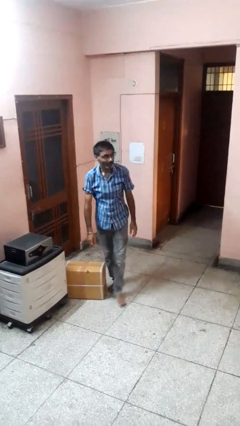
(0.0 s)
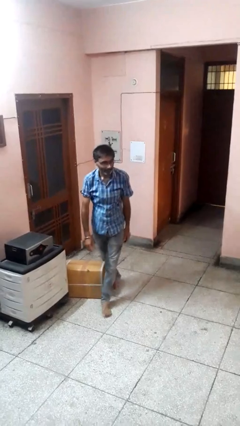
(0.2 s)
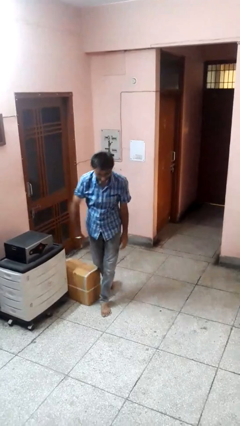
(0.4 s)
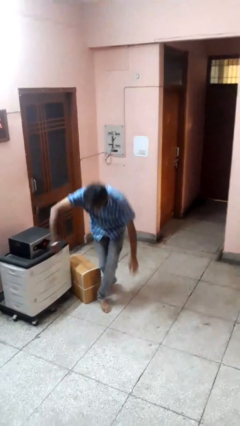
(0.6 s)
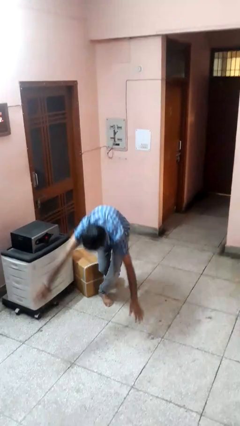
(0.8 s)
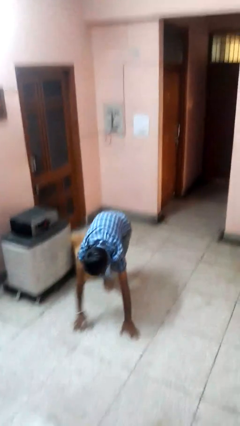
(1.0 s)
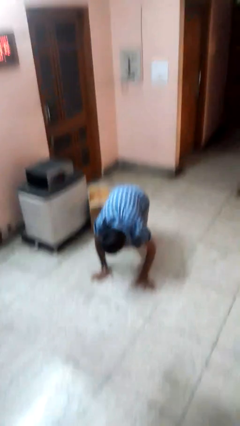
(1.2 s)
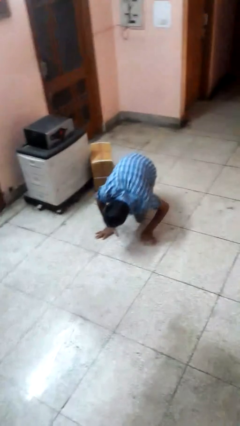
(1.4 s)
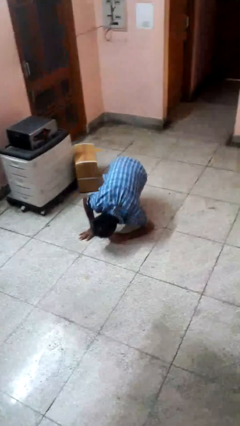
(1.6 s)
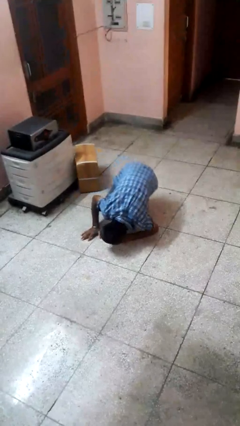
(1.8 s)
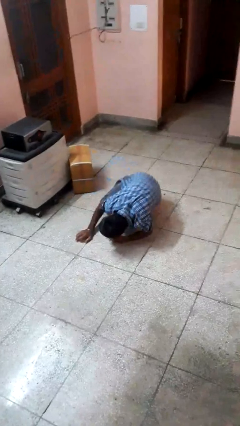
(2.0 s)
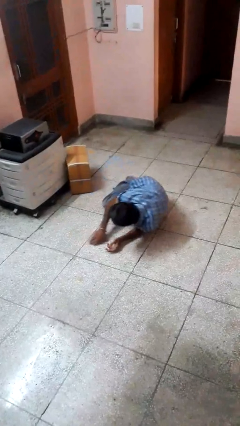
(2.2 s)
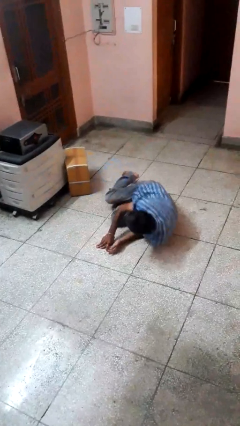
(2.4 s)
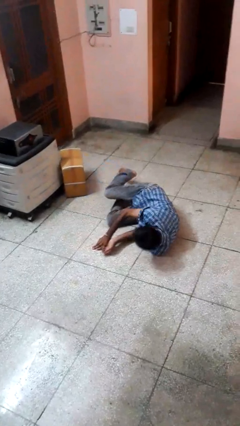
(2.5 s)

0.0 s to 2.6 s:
person trips on object on floor

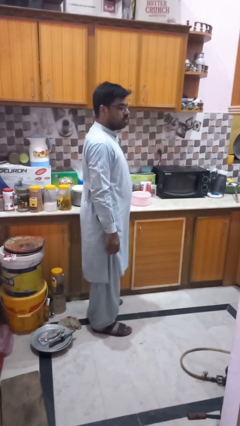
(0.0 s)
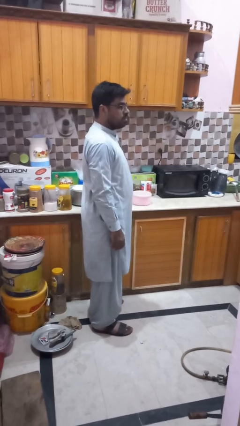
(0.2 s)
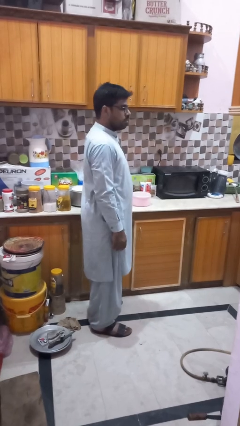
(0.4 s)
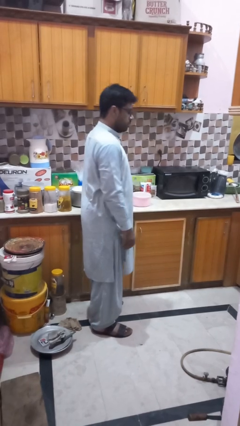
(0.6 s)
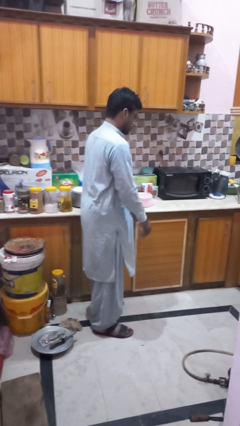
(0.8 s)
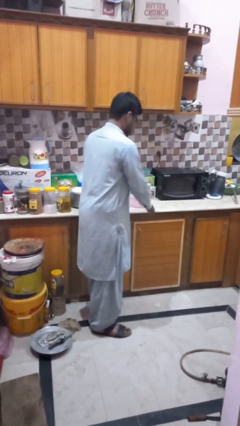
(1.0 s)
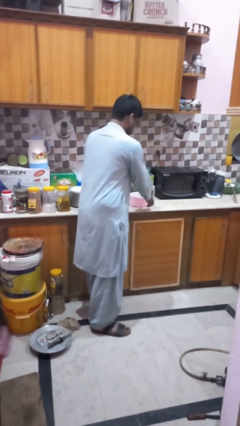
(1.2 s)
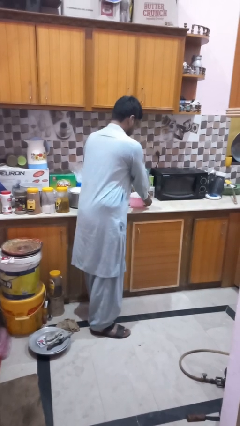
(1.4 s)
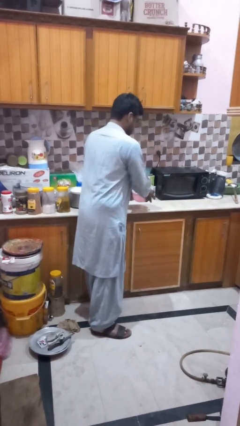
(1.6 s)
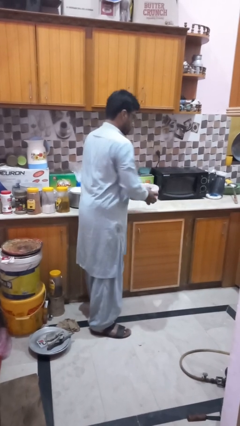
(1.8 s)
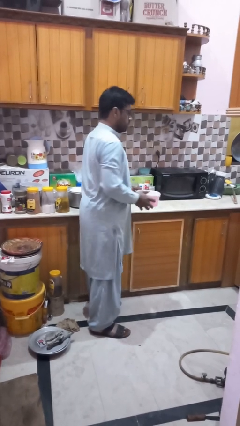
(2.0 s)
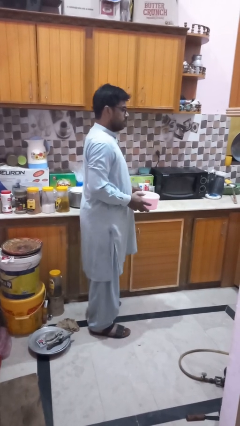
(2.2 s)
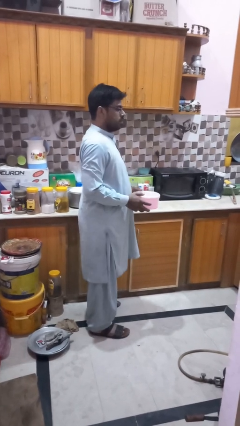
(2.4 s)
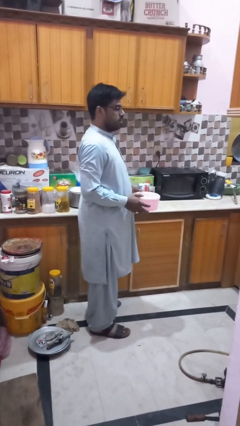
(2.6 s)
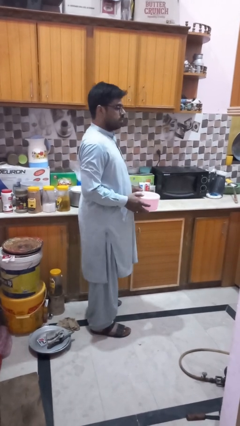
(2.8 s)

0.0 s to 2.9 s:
person picks up object from countertop

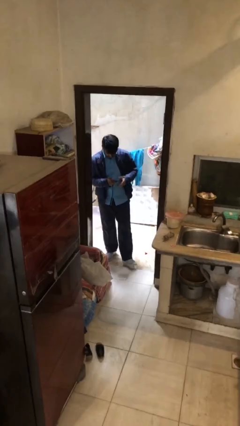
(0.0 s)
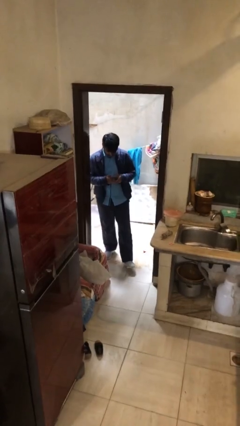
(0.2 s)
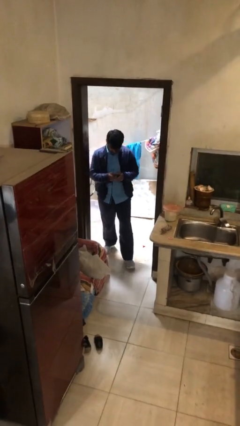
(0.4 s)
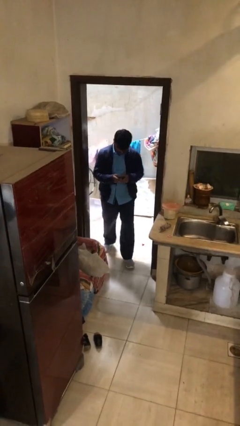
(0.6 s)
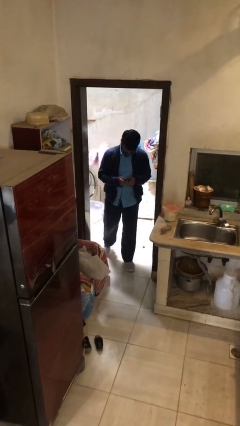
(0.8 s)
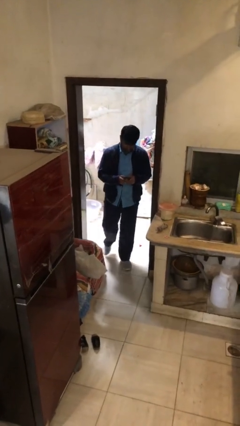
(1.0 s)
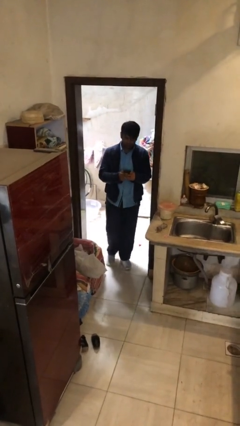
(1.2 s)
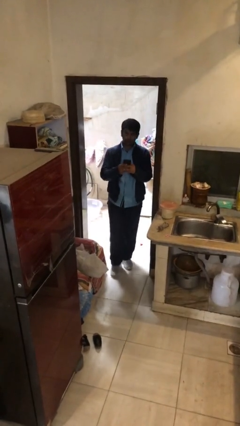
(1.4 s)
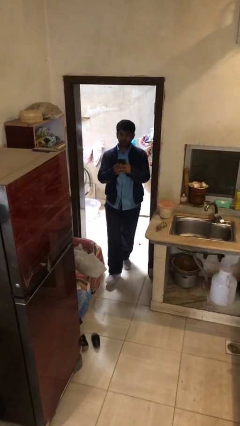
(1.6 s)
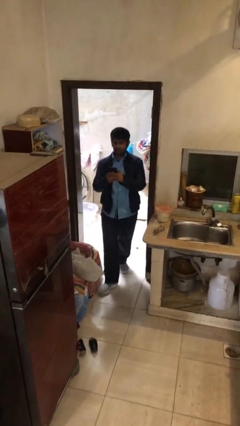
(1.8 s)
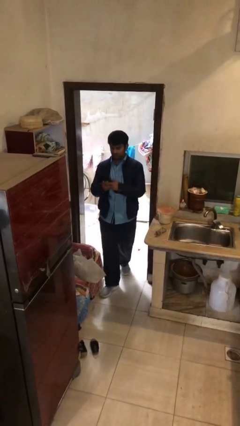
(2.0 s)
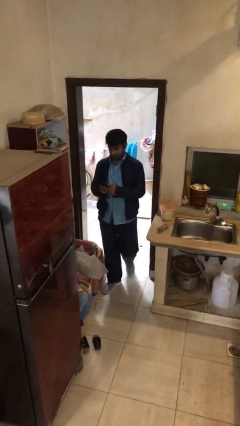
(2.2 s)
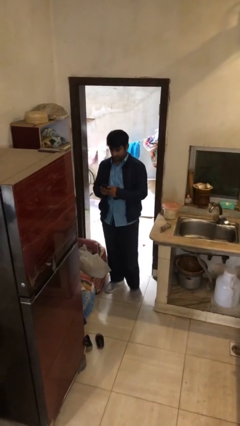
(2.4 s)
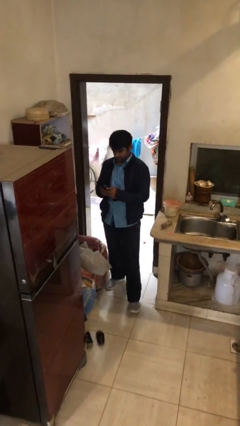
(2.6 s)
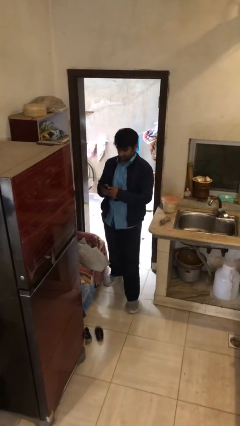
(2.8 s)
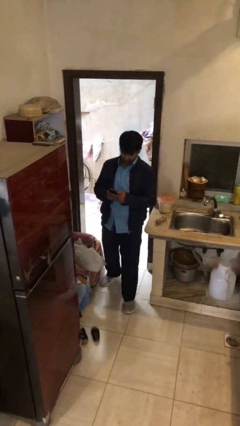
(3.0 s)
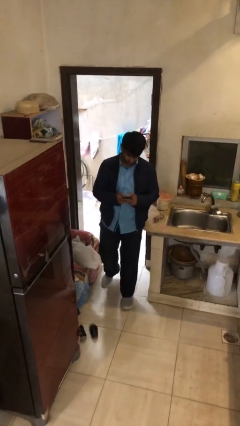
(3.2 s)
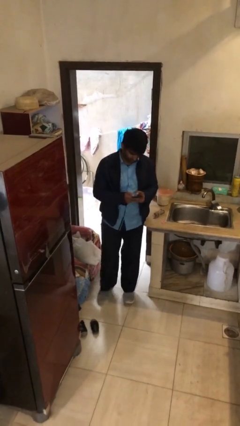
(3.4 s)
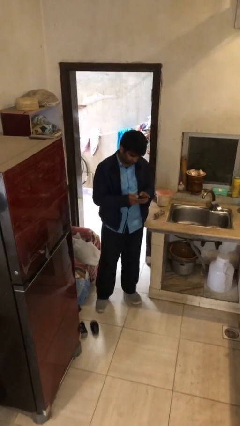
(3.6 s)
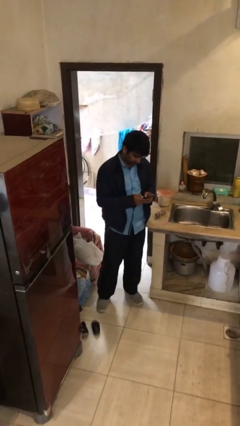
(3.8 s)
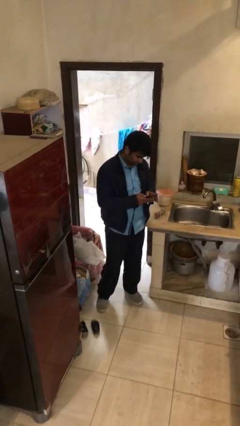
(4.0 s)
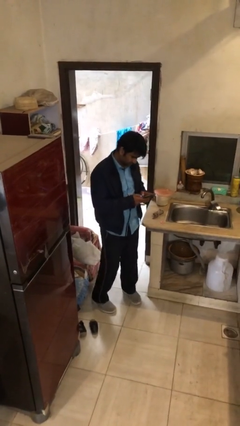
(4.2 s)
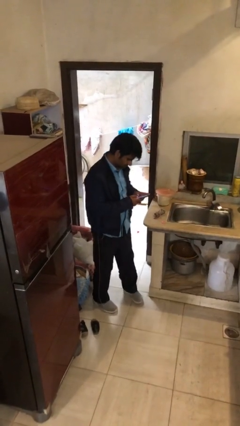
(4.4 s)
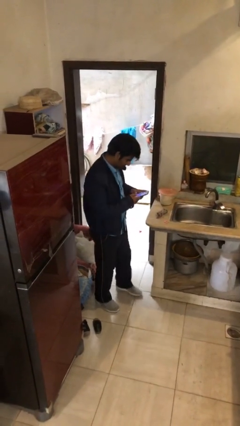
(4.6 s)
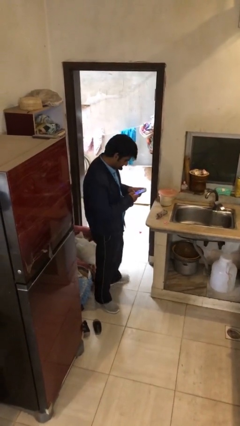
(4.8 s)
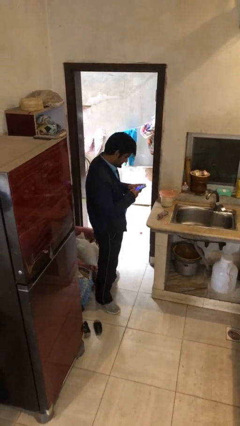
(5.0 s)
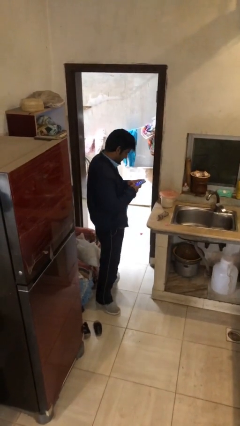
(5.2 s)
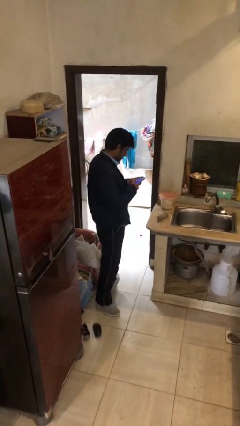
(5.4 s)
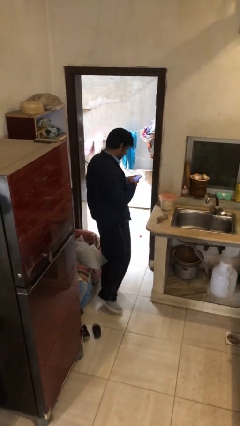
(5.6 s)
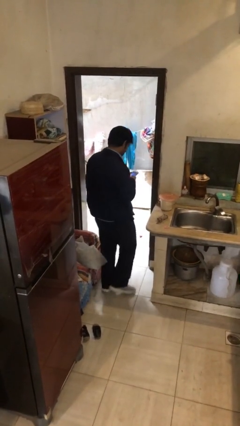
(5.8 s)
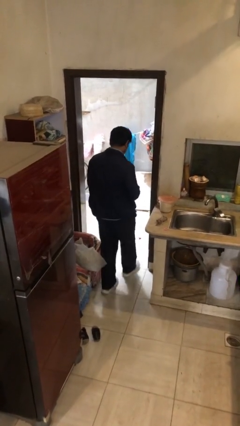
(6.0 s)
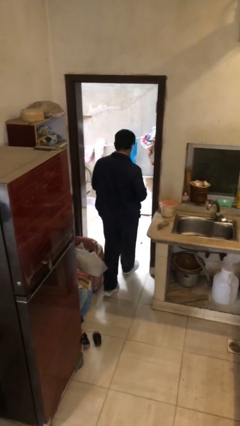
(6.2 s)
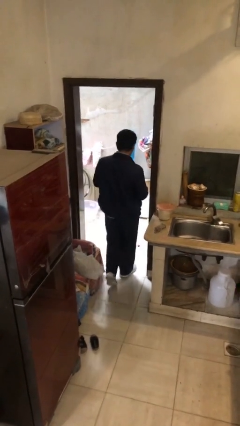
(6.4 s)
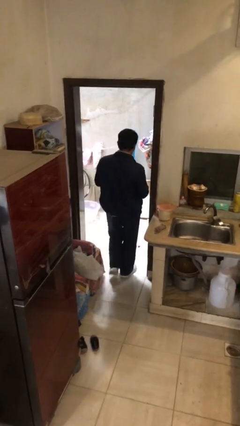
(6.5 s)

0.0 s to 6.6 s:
person enters scene through structure

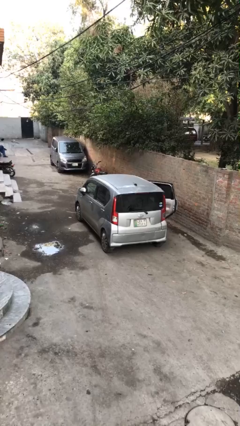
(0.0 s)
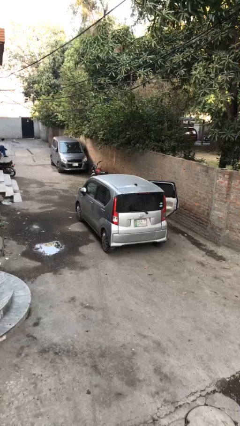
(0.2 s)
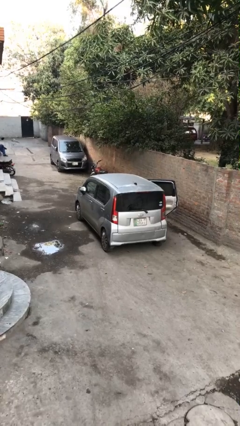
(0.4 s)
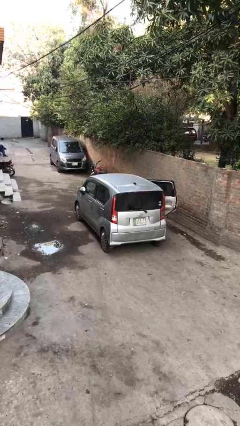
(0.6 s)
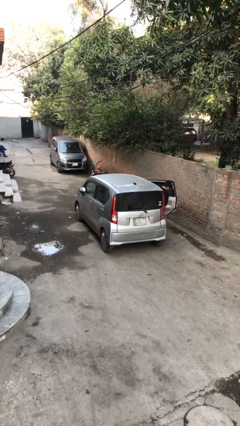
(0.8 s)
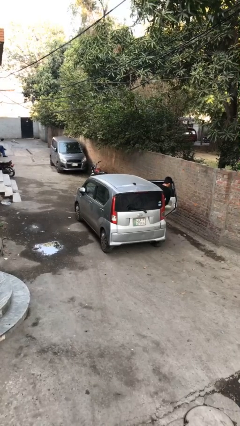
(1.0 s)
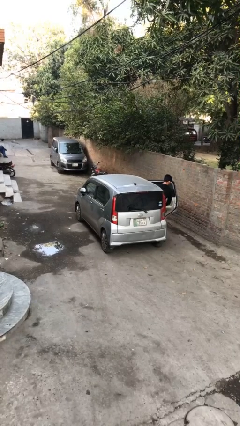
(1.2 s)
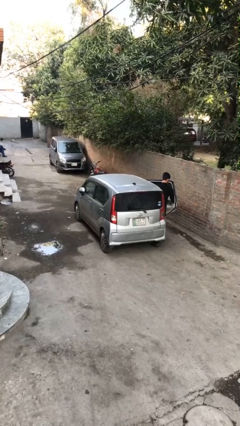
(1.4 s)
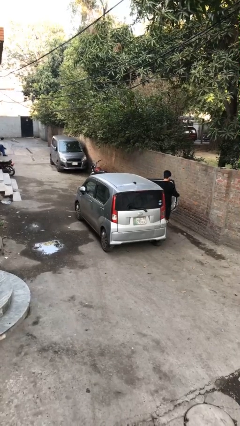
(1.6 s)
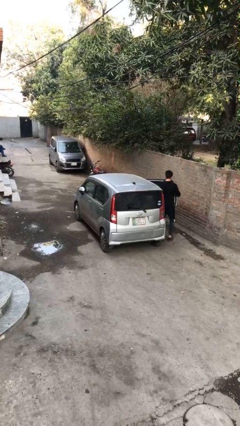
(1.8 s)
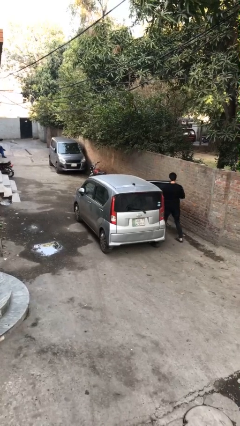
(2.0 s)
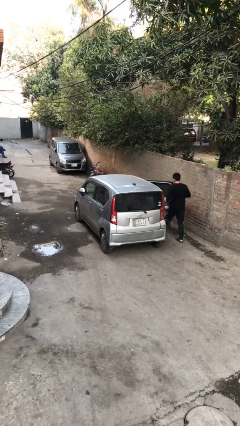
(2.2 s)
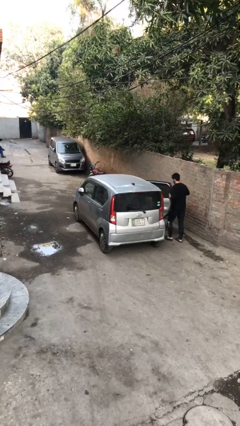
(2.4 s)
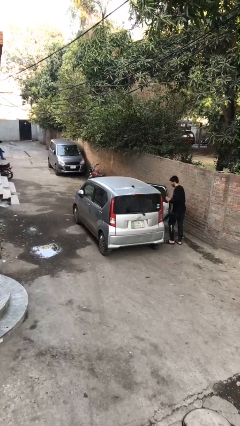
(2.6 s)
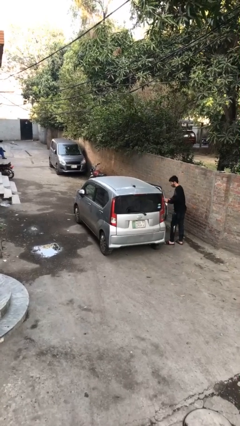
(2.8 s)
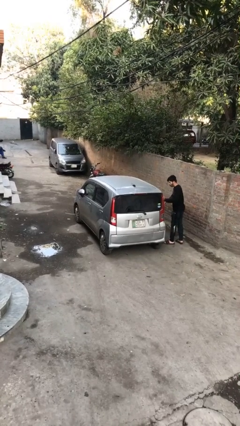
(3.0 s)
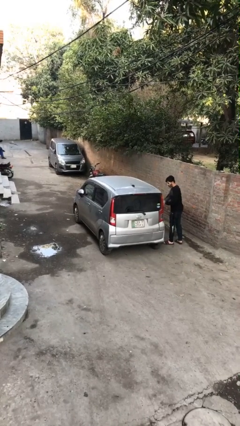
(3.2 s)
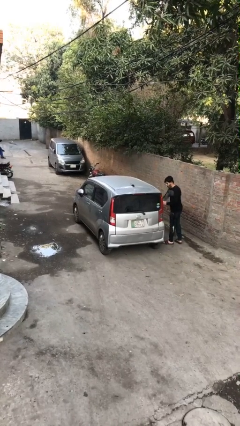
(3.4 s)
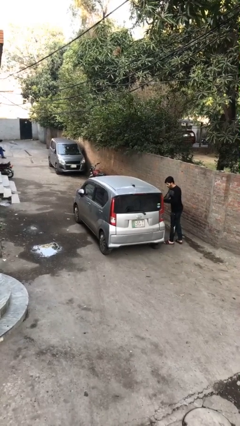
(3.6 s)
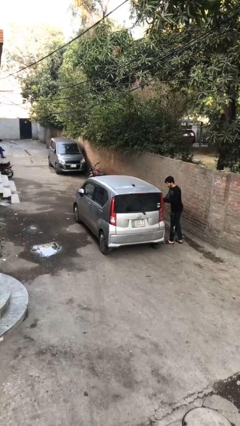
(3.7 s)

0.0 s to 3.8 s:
car drops off person

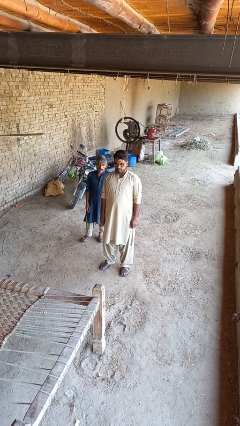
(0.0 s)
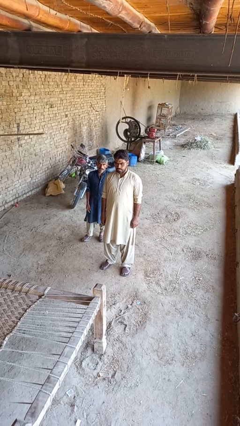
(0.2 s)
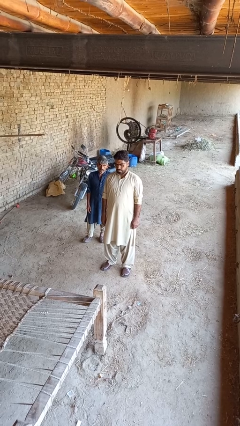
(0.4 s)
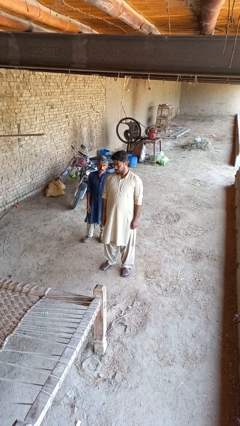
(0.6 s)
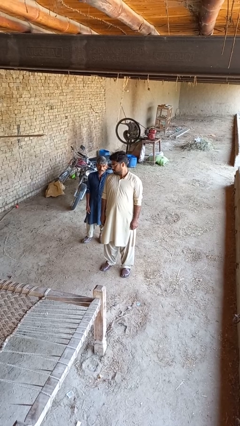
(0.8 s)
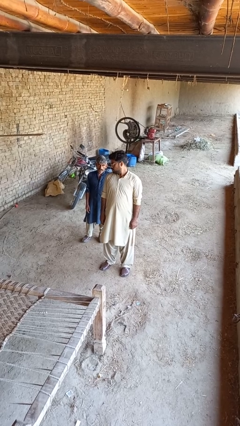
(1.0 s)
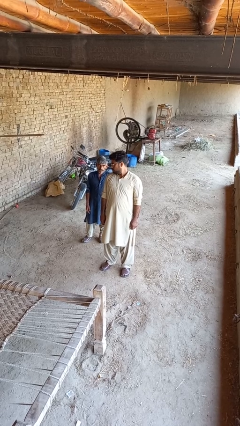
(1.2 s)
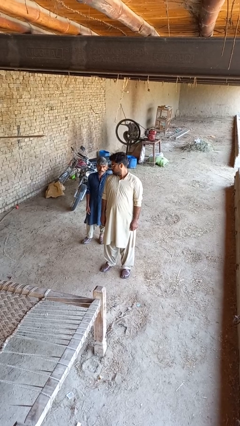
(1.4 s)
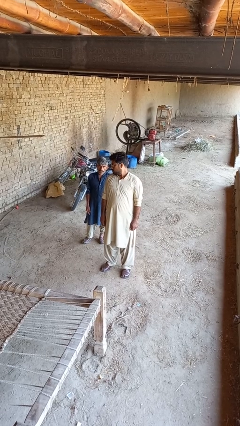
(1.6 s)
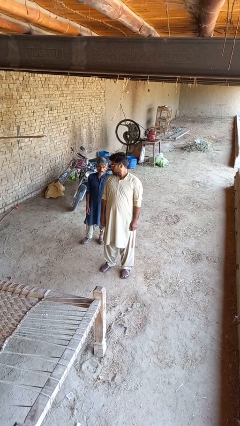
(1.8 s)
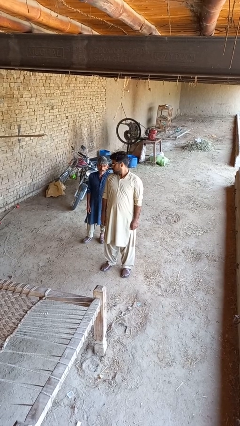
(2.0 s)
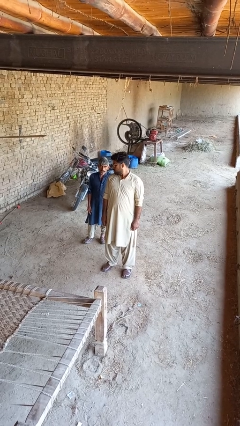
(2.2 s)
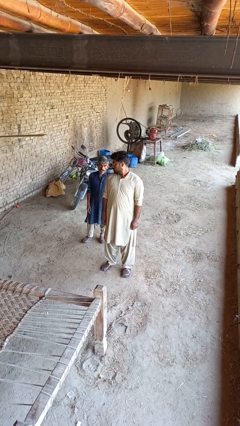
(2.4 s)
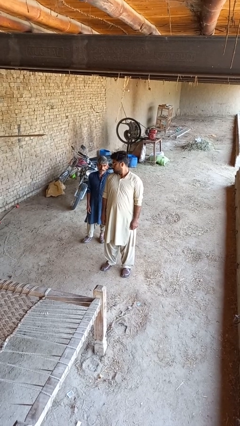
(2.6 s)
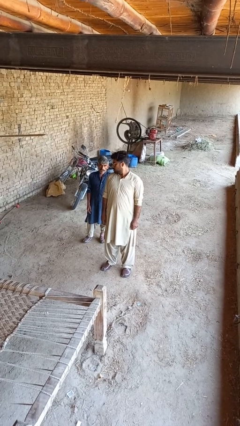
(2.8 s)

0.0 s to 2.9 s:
person looks over shoulder
